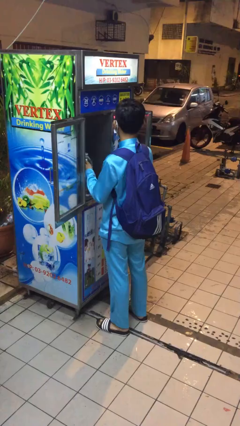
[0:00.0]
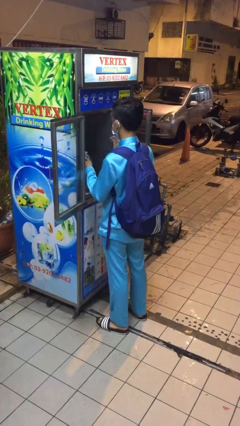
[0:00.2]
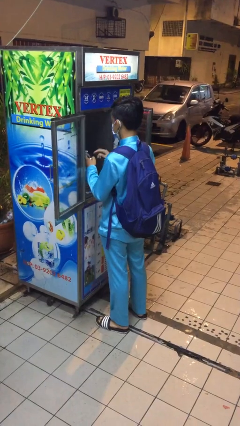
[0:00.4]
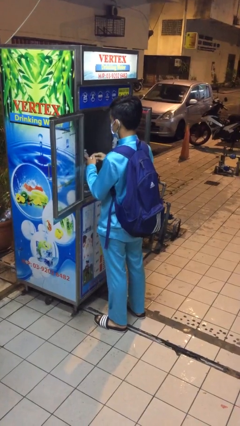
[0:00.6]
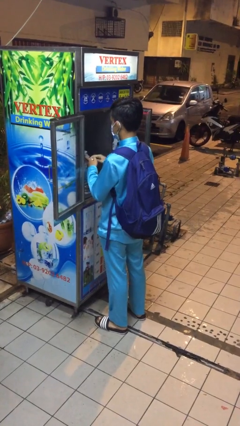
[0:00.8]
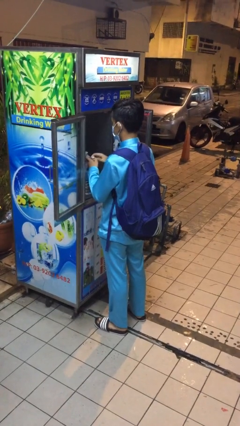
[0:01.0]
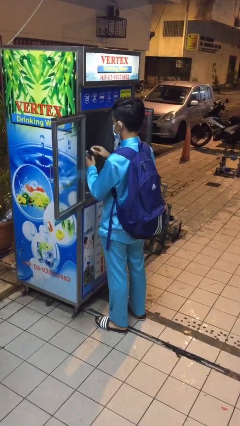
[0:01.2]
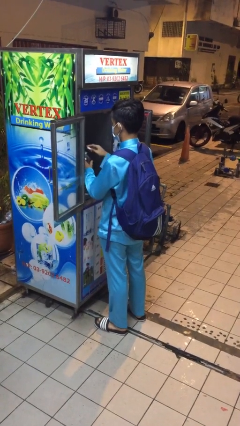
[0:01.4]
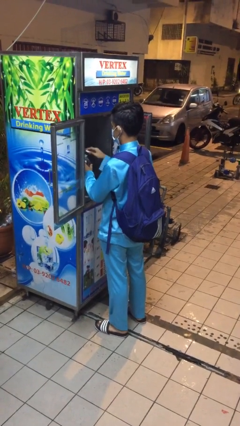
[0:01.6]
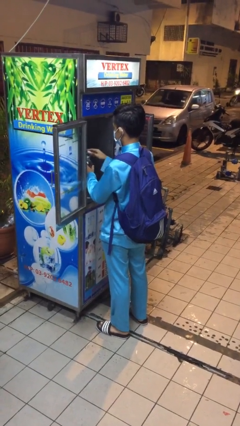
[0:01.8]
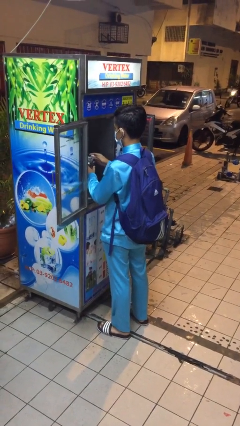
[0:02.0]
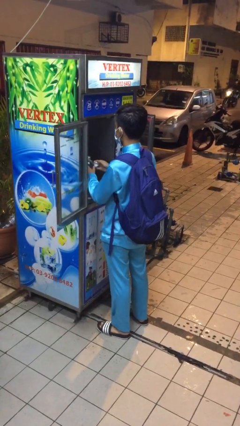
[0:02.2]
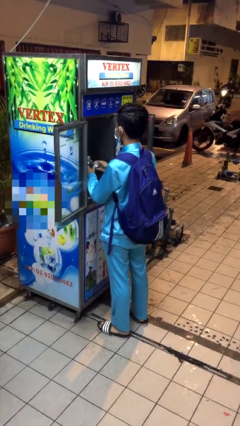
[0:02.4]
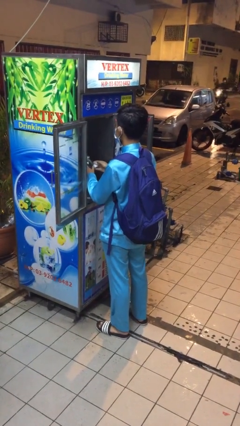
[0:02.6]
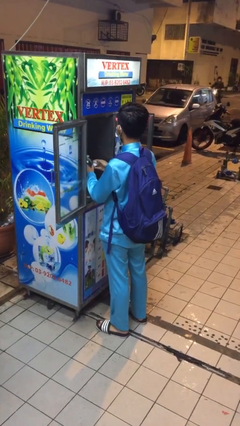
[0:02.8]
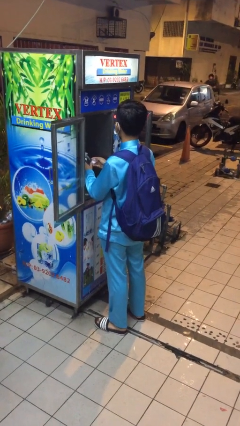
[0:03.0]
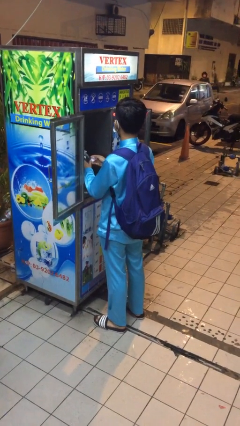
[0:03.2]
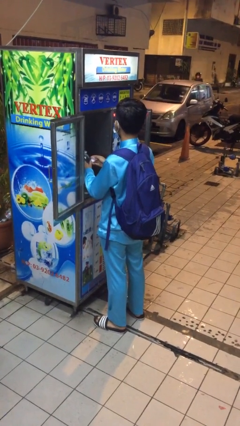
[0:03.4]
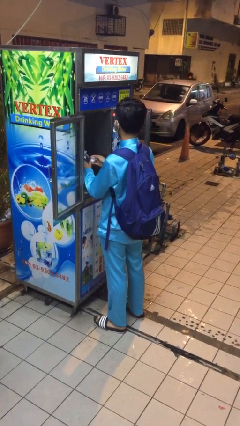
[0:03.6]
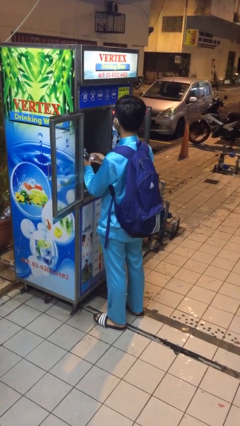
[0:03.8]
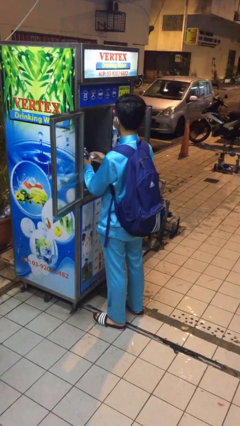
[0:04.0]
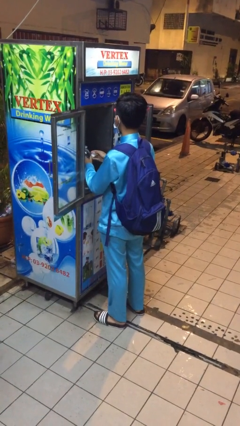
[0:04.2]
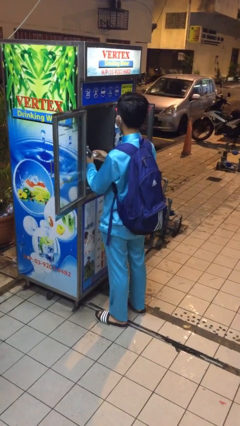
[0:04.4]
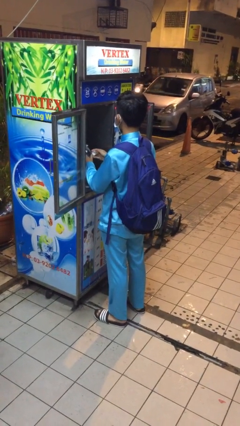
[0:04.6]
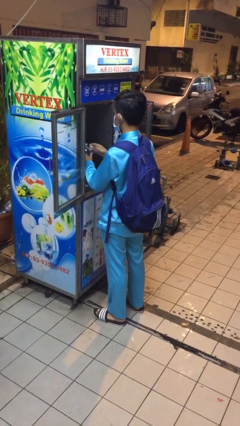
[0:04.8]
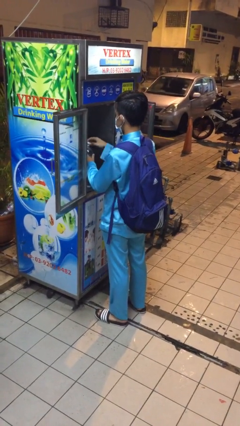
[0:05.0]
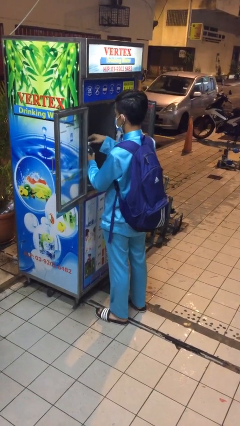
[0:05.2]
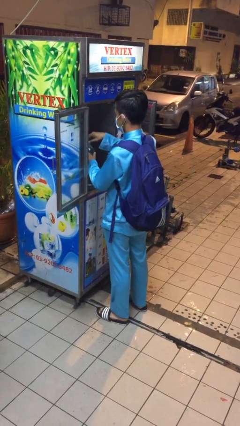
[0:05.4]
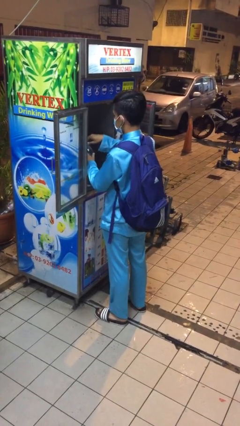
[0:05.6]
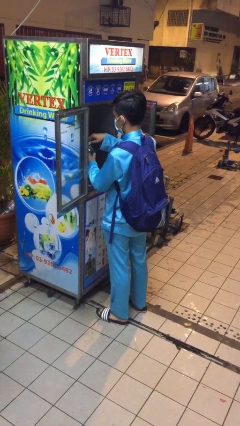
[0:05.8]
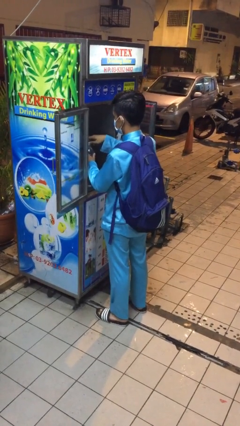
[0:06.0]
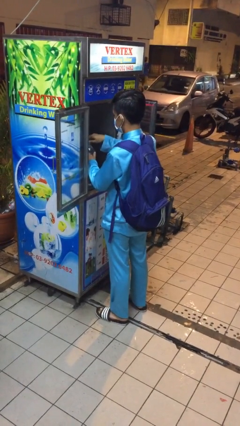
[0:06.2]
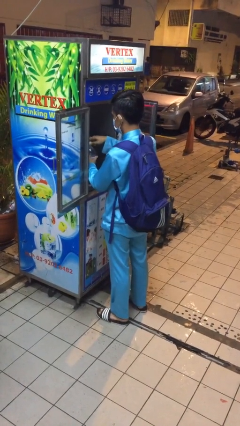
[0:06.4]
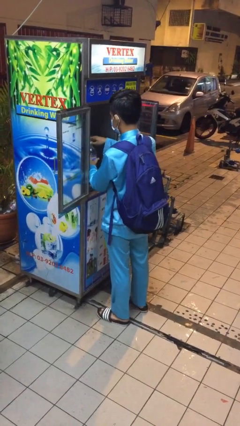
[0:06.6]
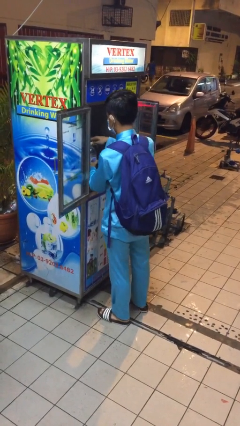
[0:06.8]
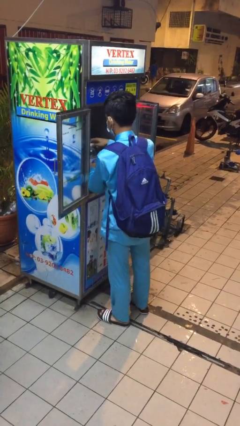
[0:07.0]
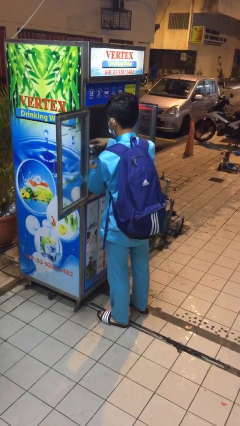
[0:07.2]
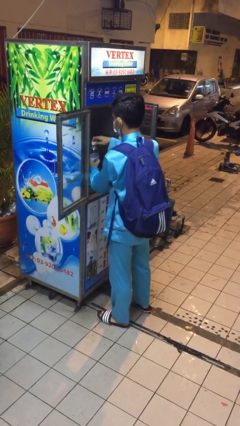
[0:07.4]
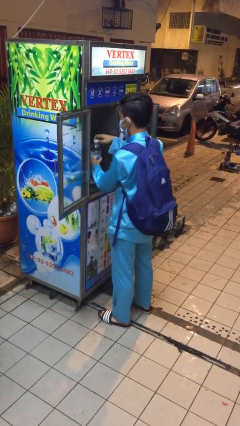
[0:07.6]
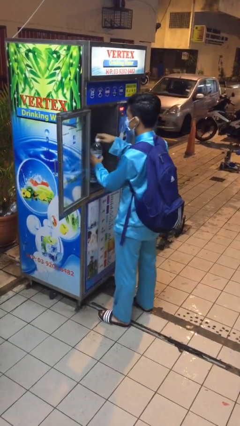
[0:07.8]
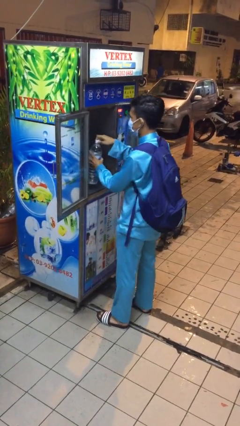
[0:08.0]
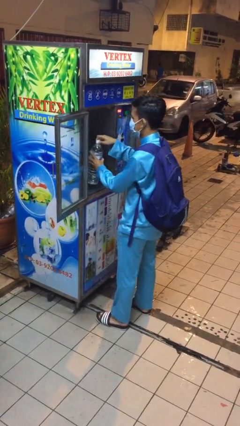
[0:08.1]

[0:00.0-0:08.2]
person purchases from machine

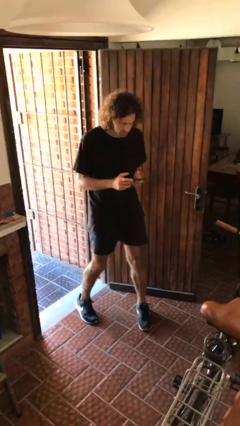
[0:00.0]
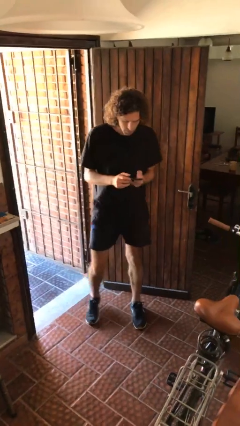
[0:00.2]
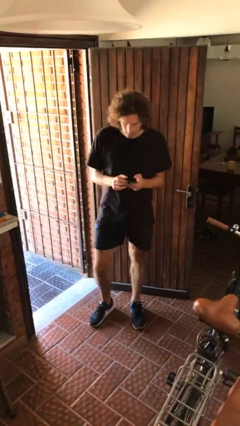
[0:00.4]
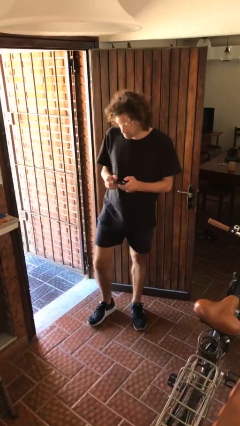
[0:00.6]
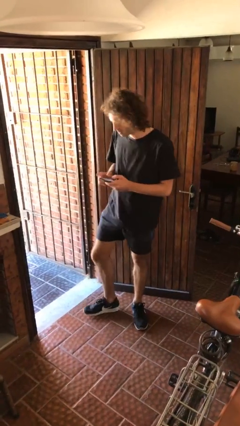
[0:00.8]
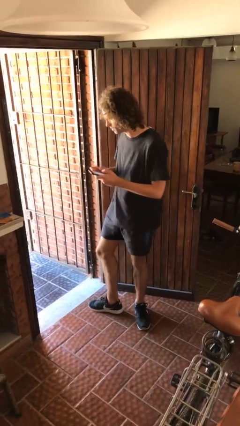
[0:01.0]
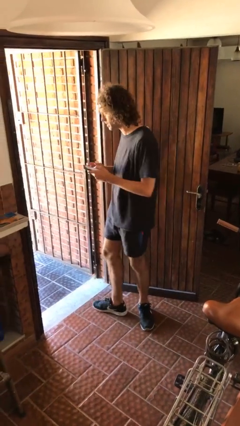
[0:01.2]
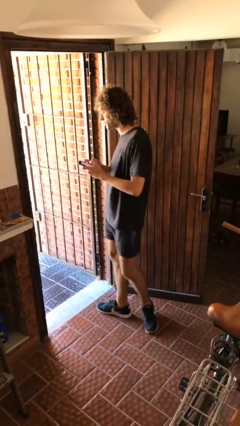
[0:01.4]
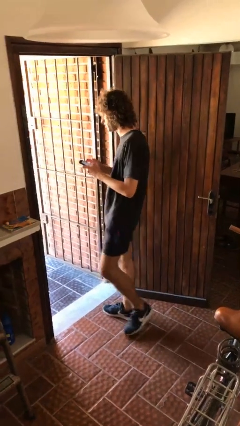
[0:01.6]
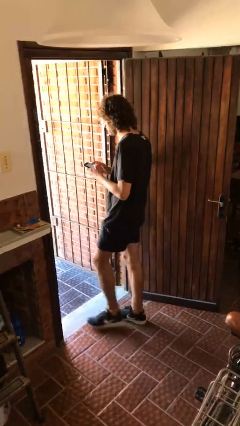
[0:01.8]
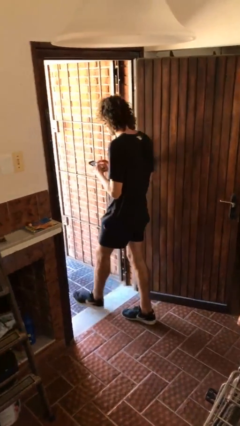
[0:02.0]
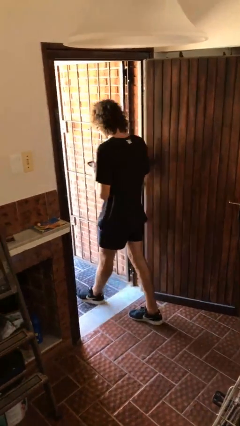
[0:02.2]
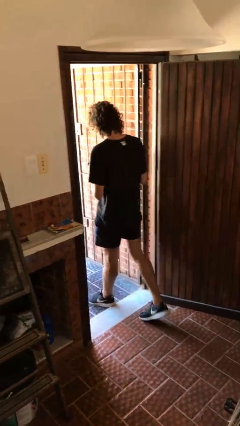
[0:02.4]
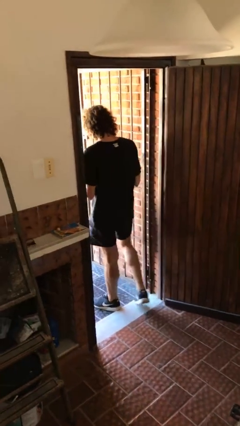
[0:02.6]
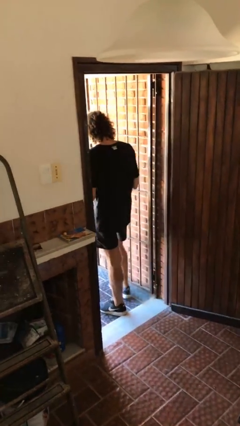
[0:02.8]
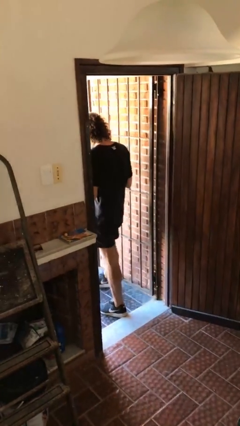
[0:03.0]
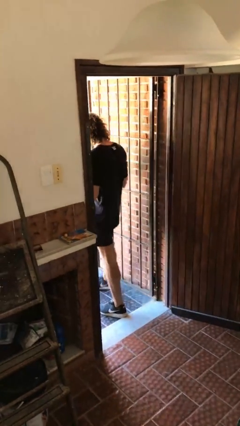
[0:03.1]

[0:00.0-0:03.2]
person exits scene through structure

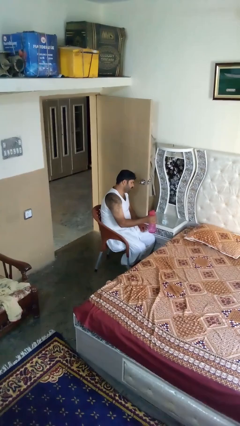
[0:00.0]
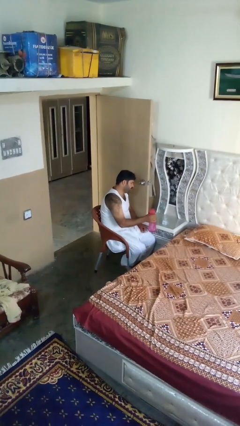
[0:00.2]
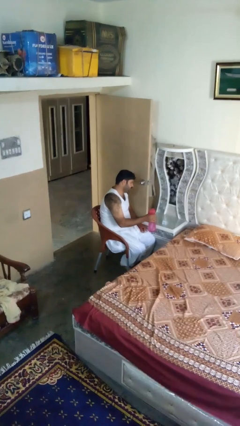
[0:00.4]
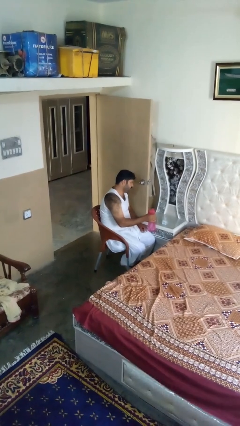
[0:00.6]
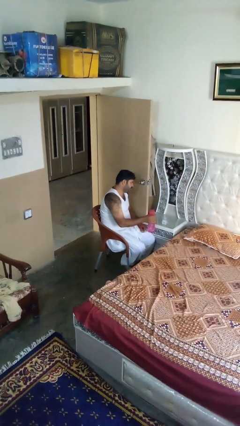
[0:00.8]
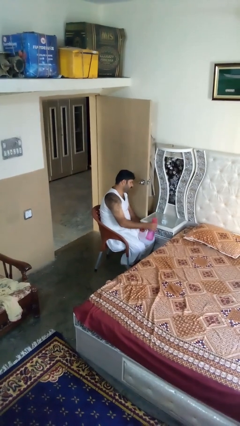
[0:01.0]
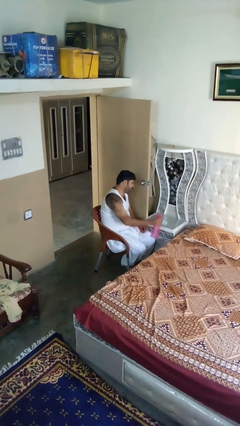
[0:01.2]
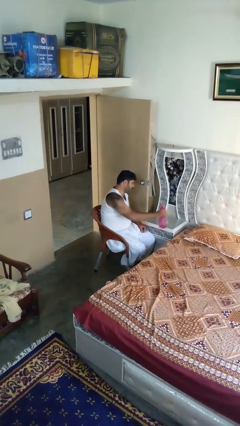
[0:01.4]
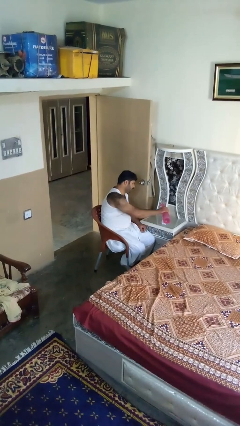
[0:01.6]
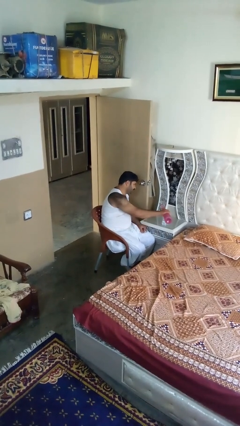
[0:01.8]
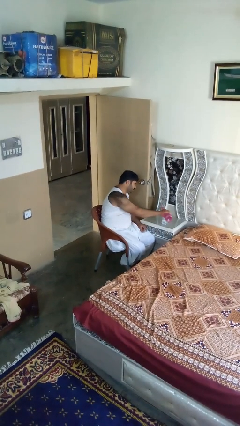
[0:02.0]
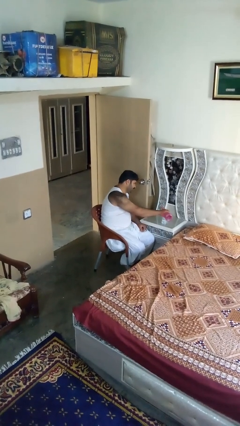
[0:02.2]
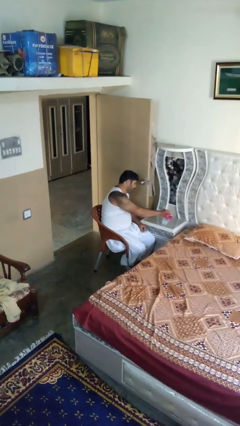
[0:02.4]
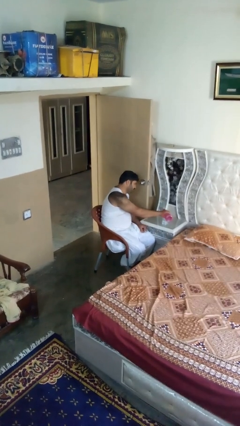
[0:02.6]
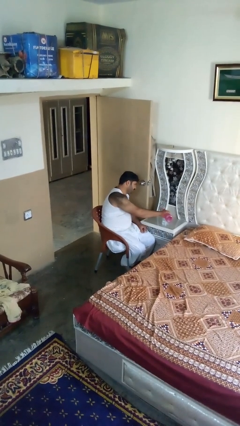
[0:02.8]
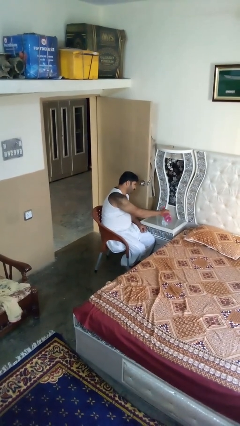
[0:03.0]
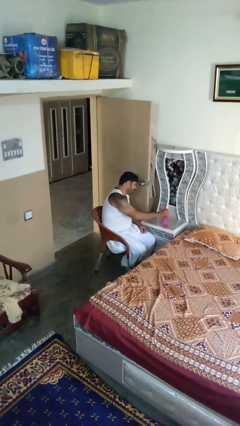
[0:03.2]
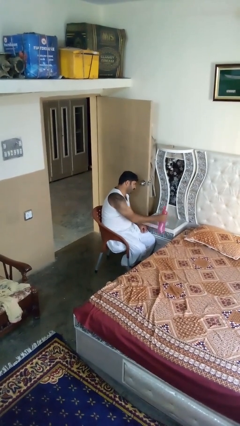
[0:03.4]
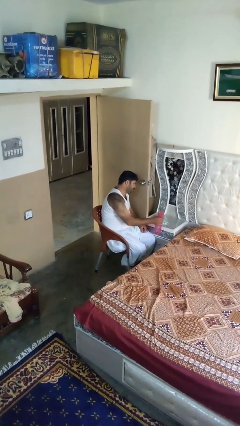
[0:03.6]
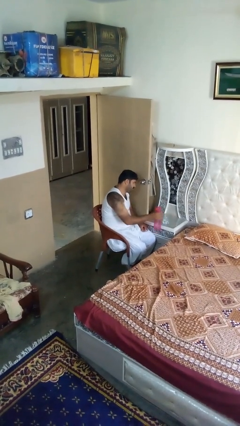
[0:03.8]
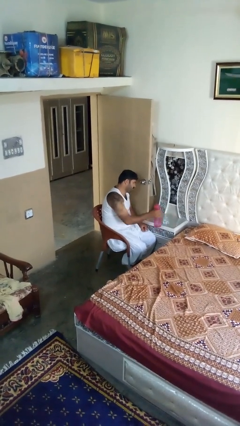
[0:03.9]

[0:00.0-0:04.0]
person pours liquid into cup

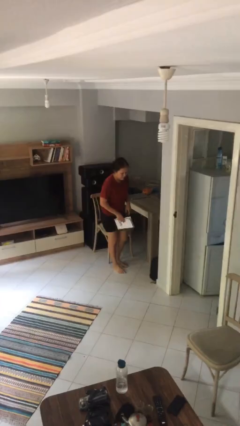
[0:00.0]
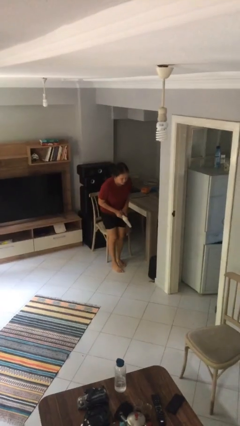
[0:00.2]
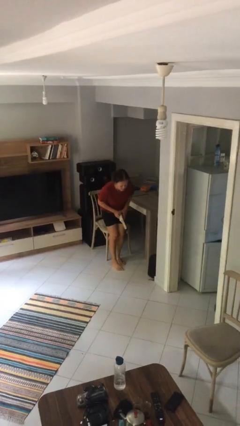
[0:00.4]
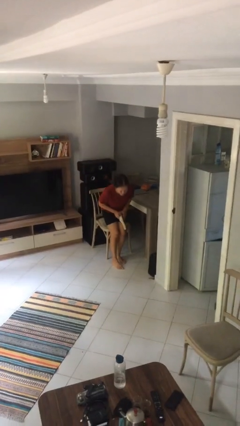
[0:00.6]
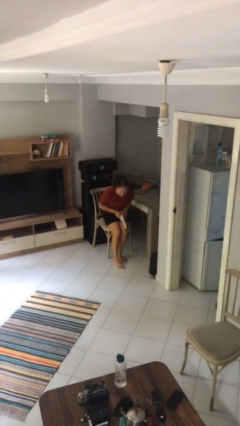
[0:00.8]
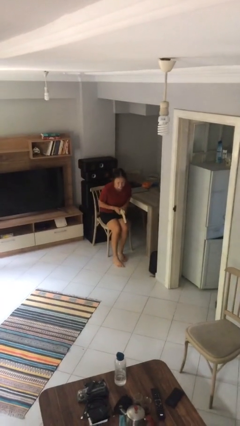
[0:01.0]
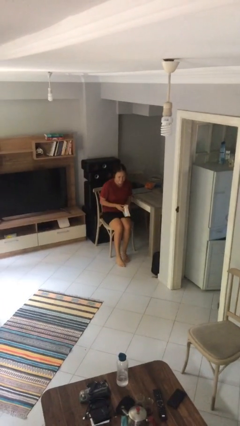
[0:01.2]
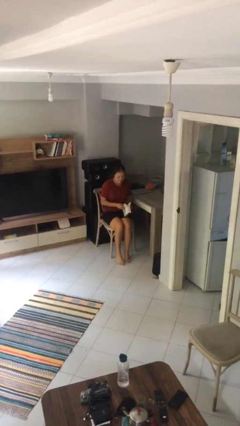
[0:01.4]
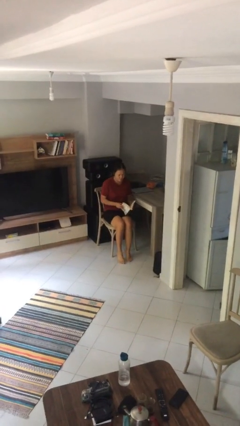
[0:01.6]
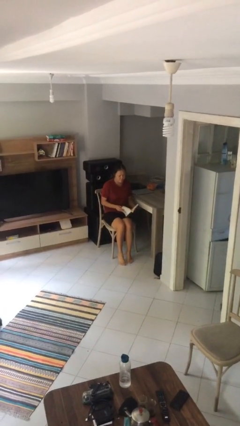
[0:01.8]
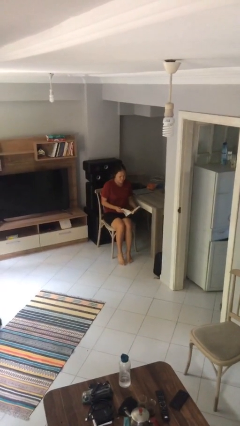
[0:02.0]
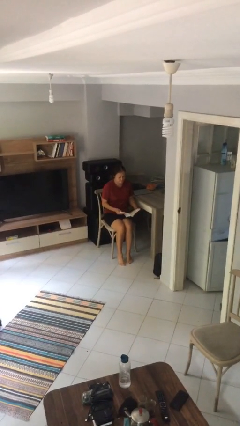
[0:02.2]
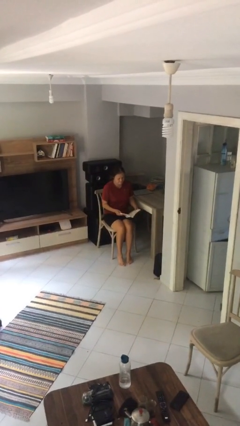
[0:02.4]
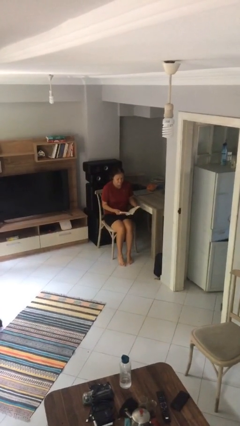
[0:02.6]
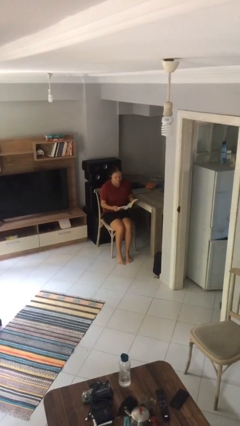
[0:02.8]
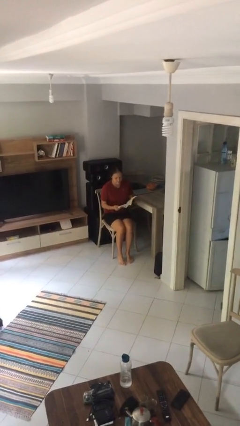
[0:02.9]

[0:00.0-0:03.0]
person sits down
